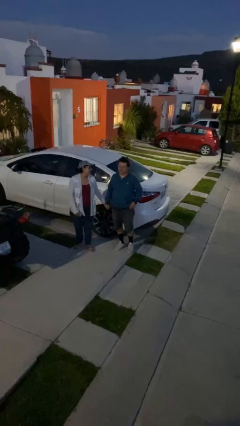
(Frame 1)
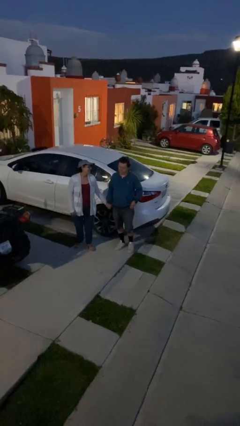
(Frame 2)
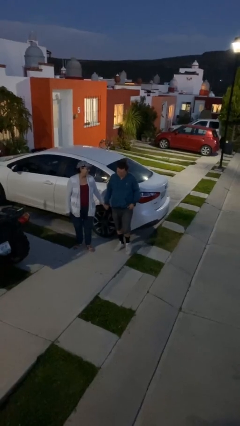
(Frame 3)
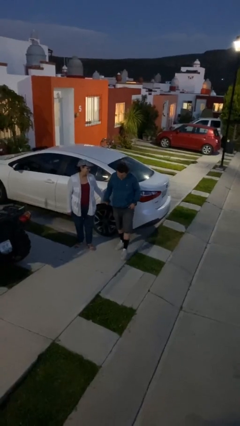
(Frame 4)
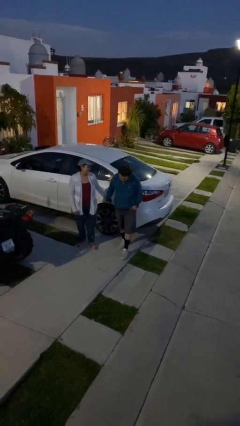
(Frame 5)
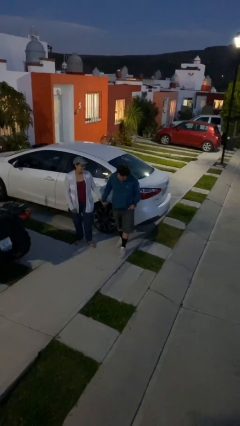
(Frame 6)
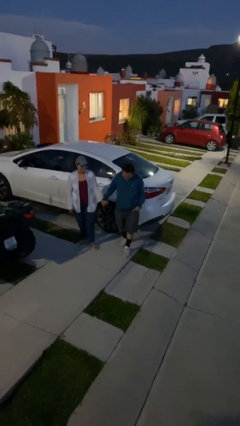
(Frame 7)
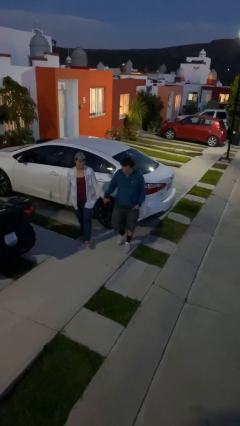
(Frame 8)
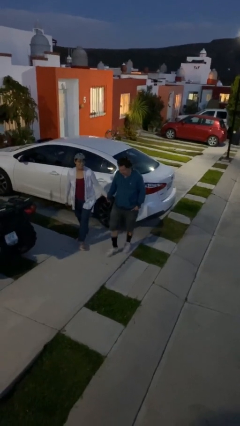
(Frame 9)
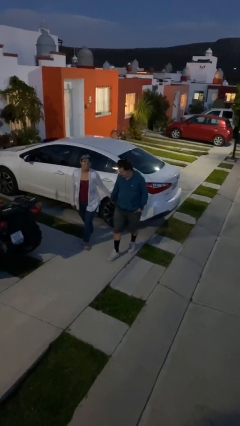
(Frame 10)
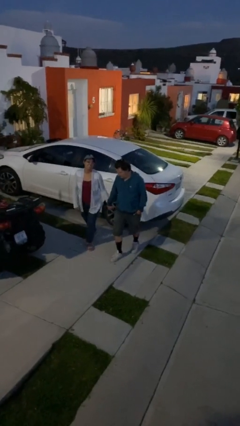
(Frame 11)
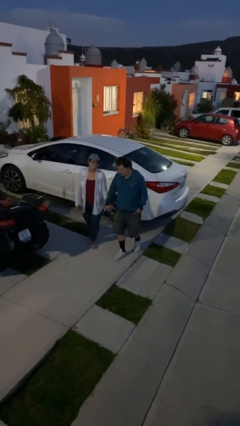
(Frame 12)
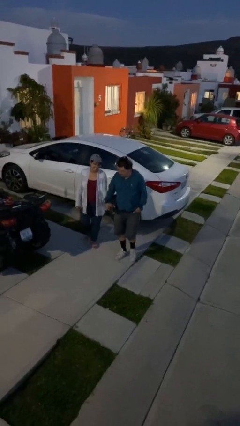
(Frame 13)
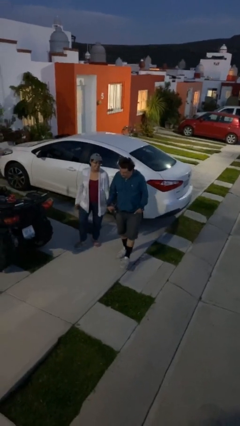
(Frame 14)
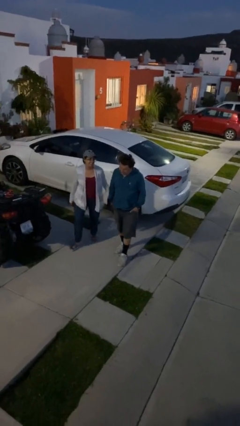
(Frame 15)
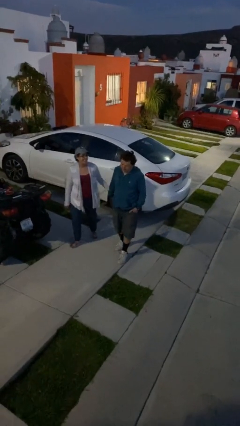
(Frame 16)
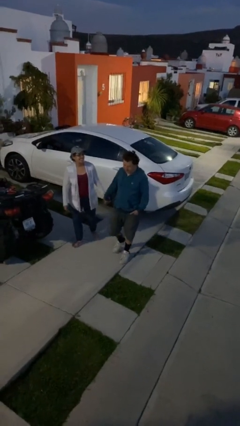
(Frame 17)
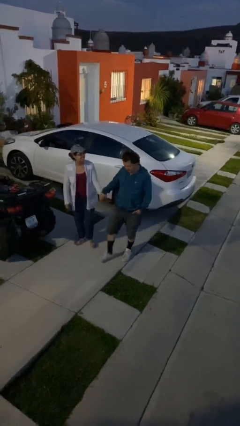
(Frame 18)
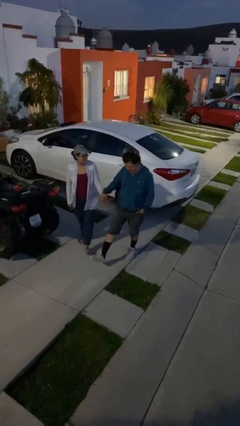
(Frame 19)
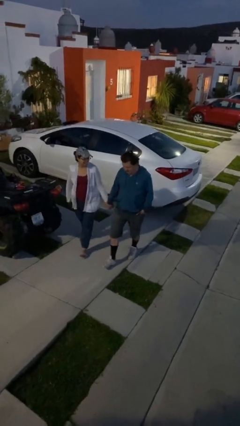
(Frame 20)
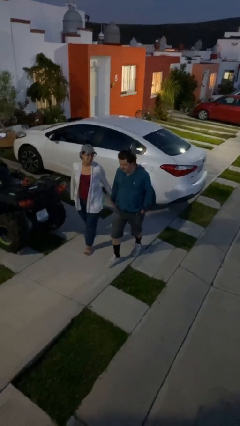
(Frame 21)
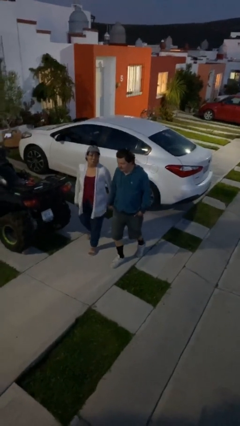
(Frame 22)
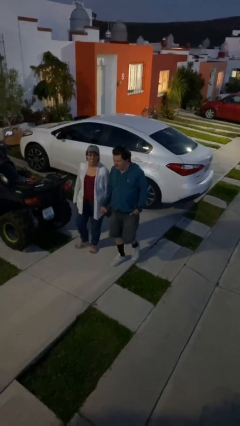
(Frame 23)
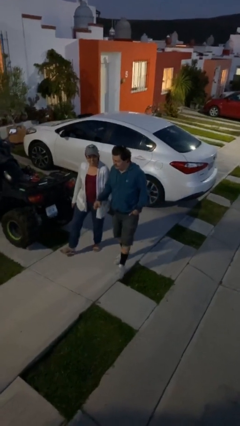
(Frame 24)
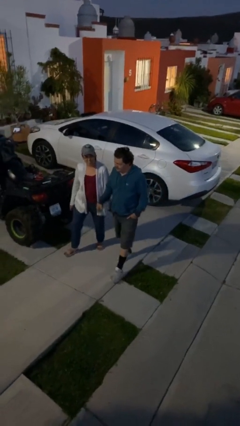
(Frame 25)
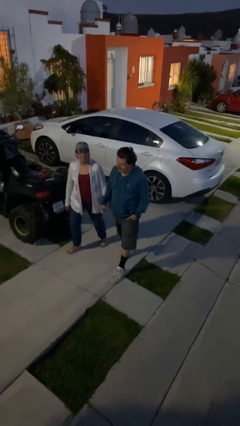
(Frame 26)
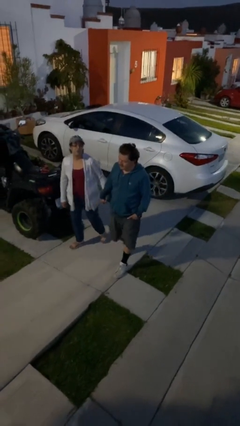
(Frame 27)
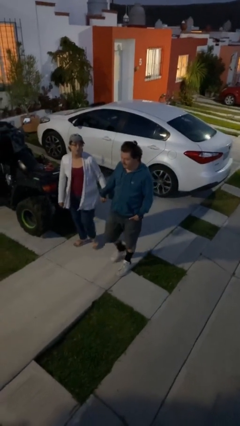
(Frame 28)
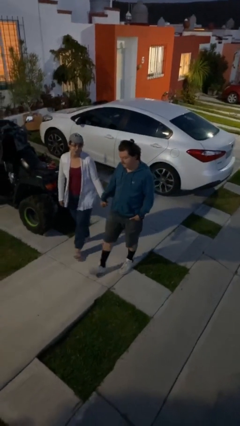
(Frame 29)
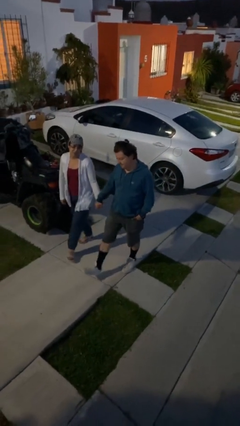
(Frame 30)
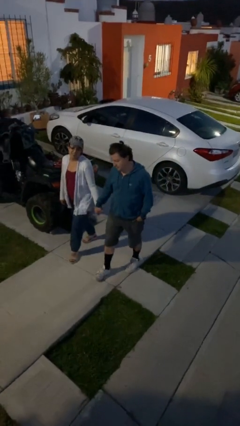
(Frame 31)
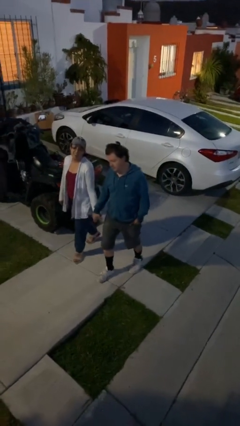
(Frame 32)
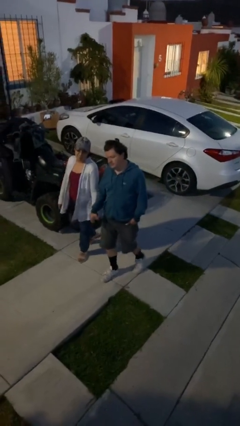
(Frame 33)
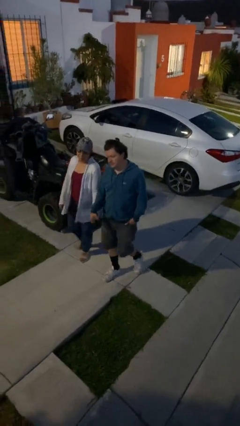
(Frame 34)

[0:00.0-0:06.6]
person holds hand

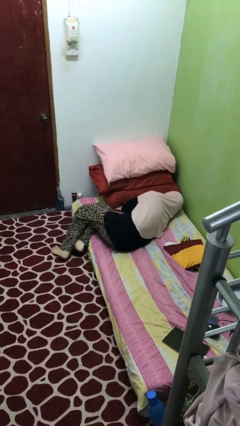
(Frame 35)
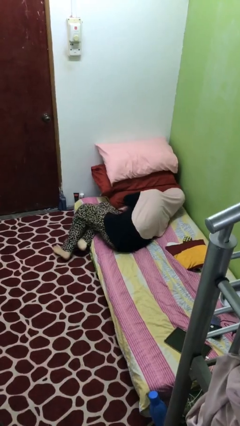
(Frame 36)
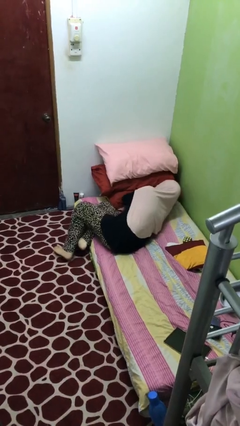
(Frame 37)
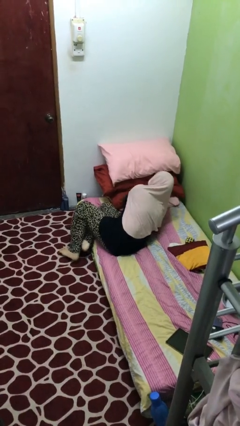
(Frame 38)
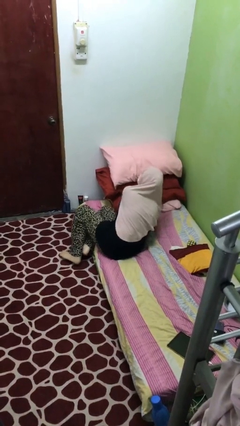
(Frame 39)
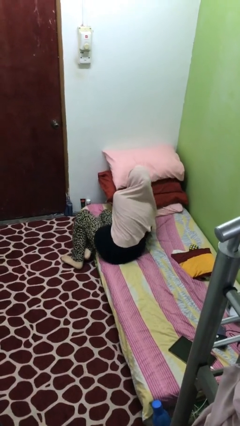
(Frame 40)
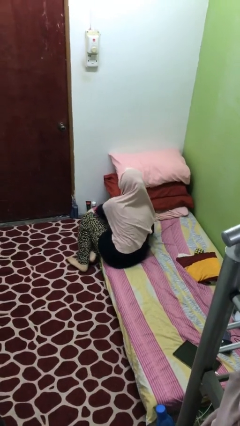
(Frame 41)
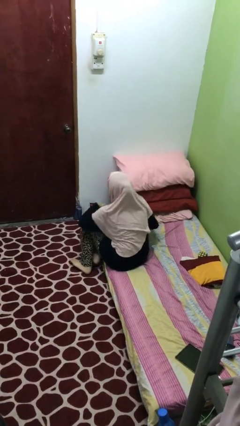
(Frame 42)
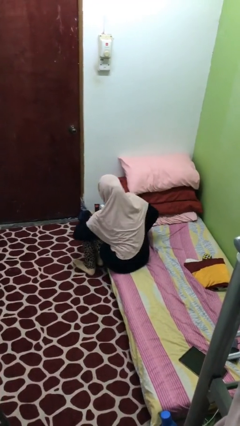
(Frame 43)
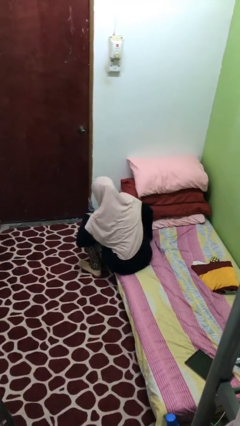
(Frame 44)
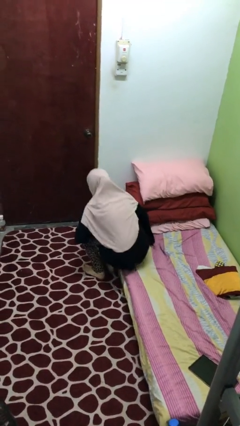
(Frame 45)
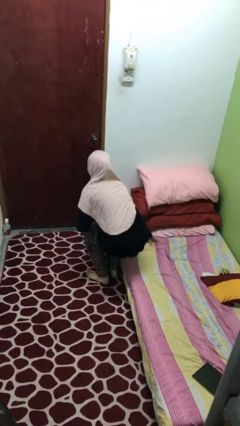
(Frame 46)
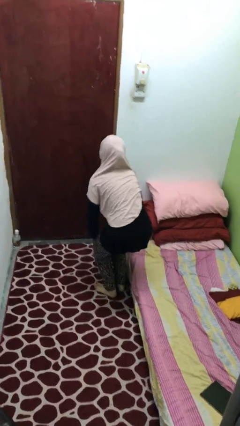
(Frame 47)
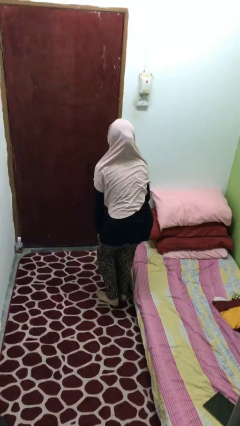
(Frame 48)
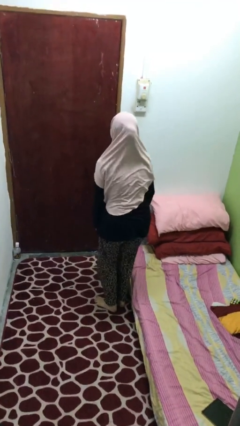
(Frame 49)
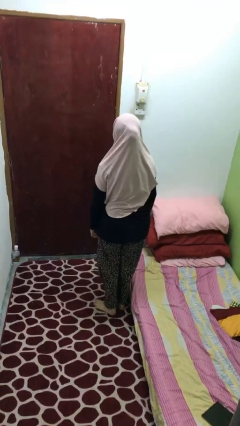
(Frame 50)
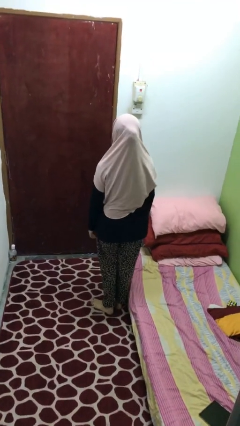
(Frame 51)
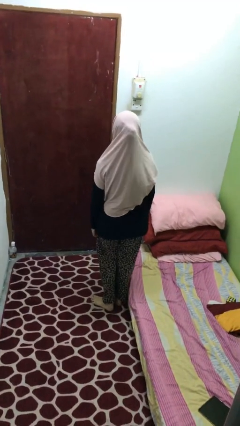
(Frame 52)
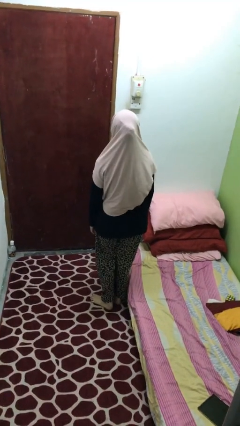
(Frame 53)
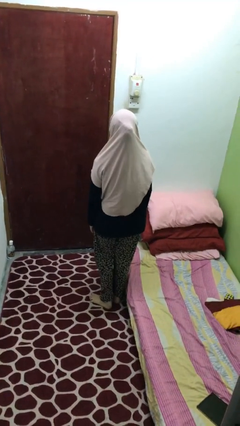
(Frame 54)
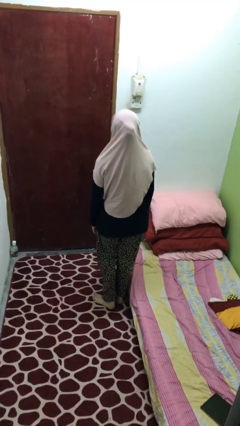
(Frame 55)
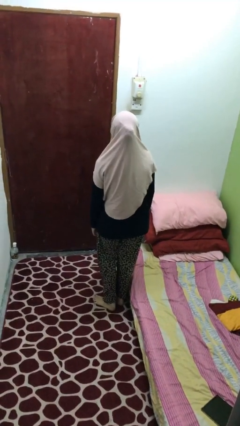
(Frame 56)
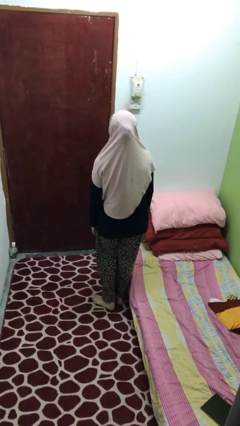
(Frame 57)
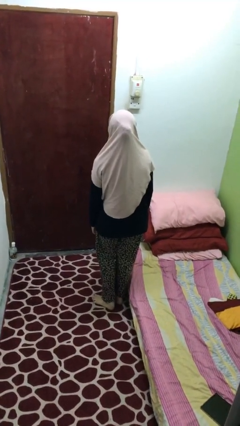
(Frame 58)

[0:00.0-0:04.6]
person stands up

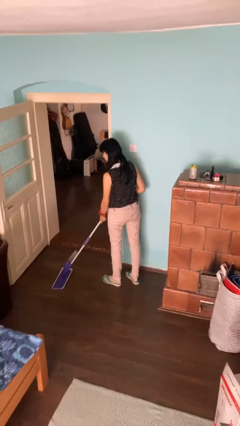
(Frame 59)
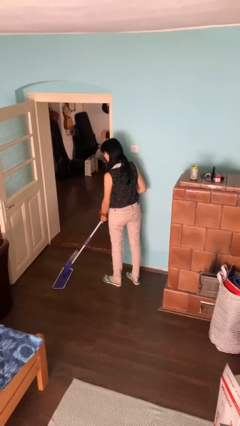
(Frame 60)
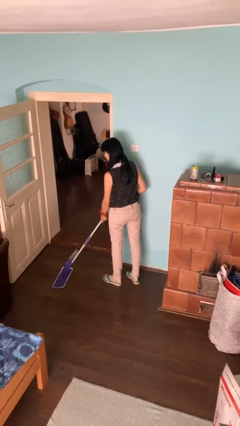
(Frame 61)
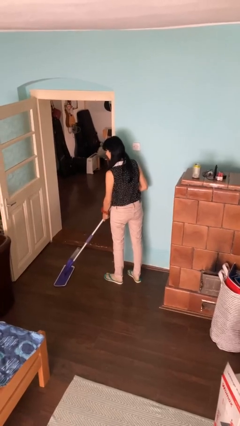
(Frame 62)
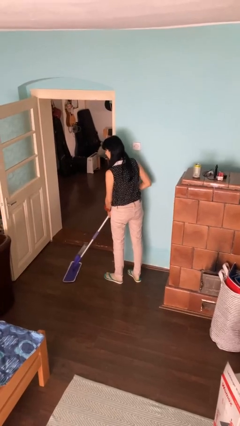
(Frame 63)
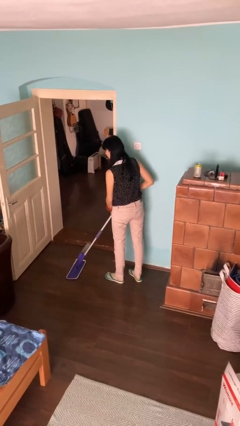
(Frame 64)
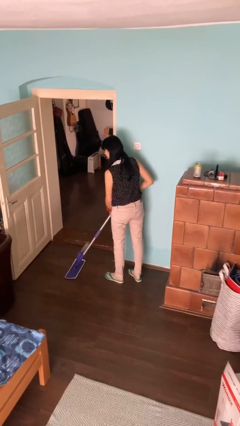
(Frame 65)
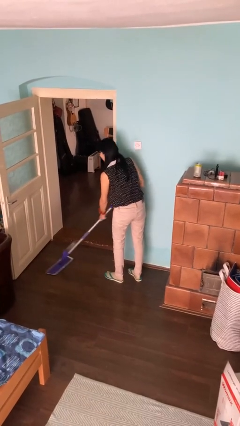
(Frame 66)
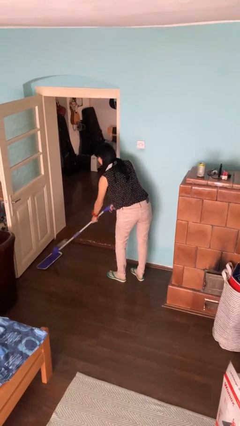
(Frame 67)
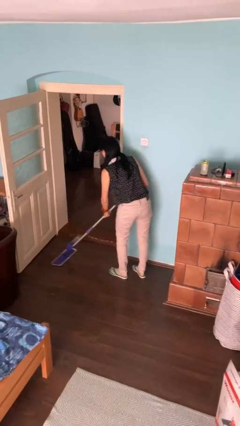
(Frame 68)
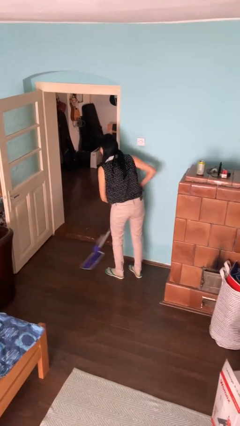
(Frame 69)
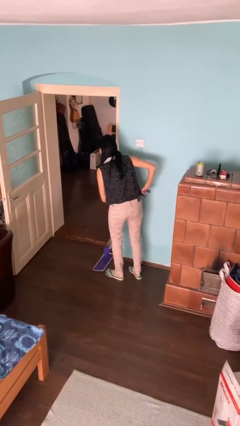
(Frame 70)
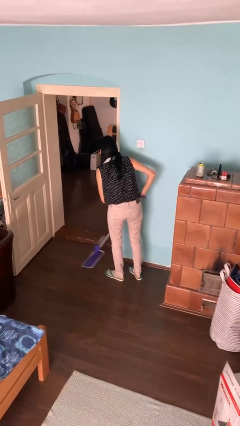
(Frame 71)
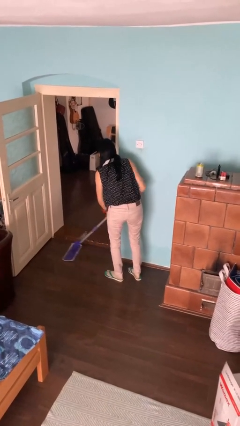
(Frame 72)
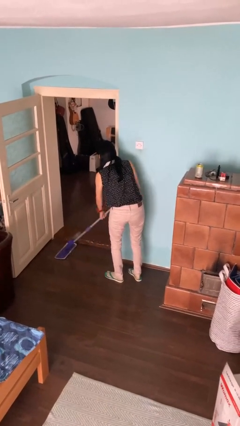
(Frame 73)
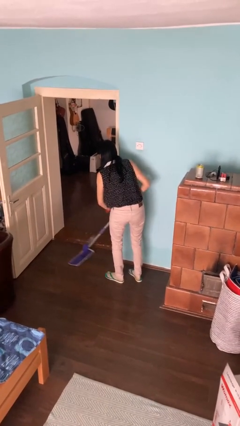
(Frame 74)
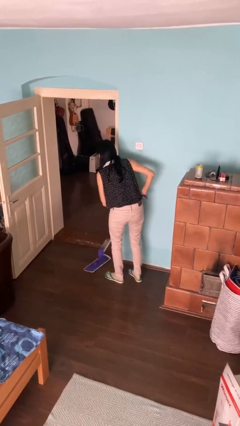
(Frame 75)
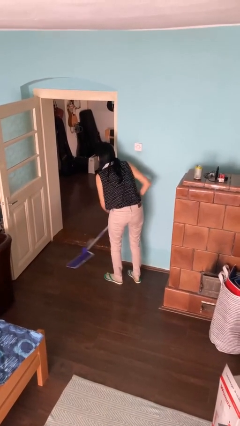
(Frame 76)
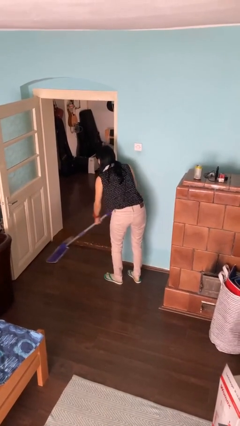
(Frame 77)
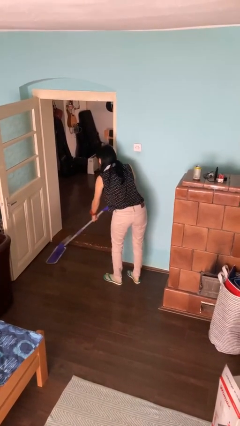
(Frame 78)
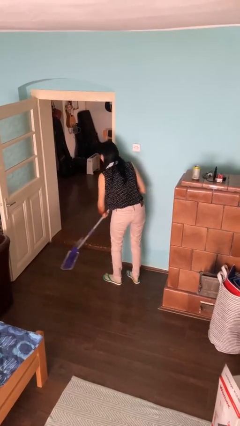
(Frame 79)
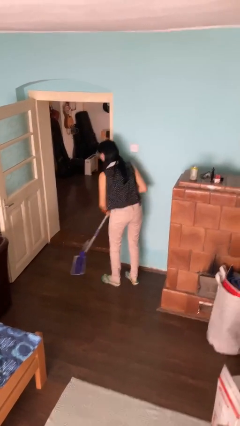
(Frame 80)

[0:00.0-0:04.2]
person mops

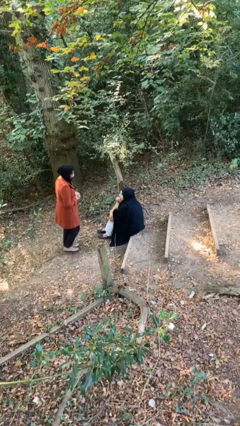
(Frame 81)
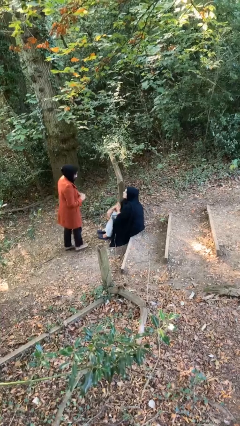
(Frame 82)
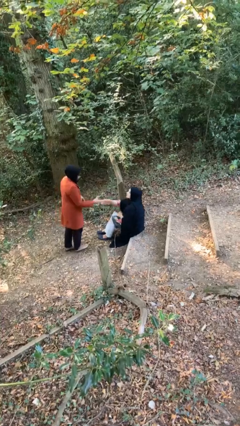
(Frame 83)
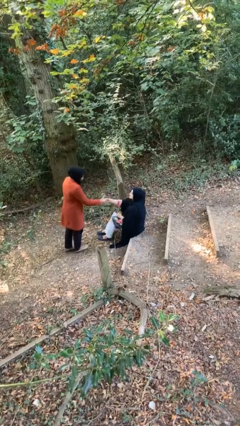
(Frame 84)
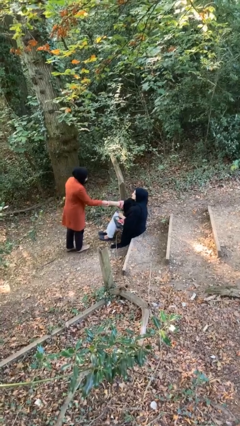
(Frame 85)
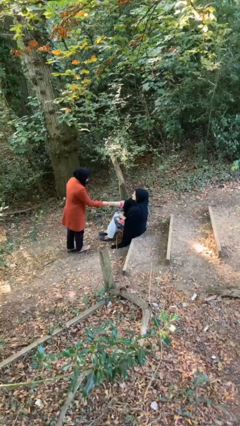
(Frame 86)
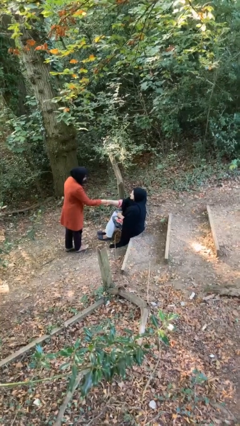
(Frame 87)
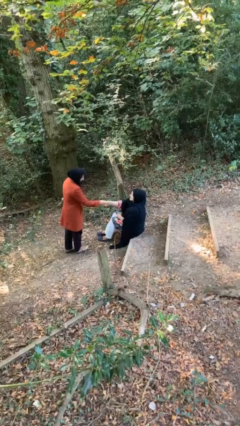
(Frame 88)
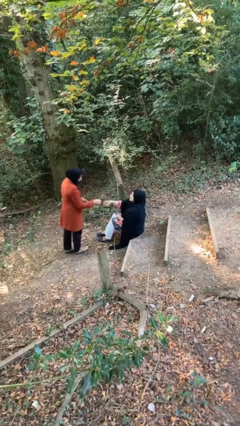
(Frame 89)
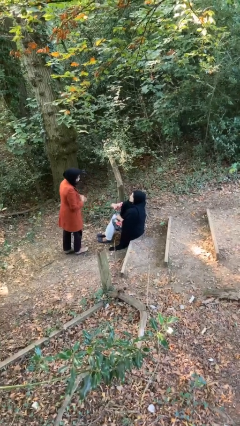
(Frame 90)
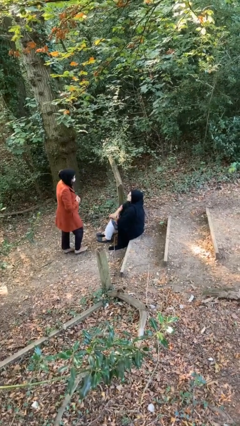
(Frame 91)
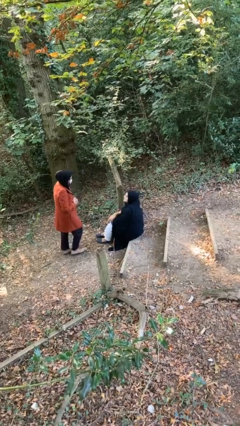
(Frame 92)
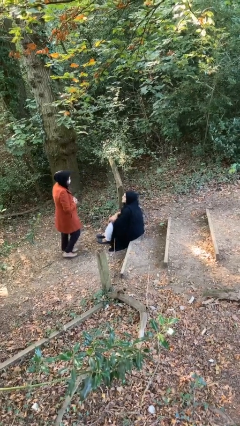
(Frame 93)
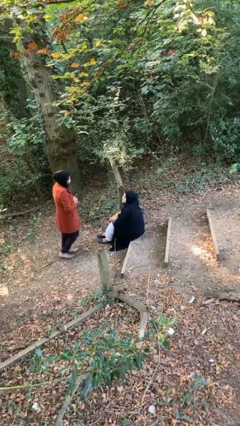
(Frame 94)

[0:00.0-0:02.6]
person shakes hand
